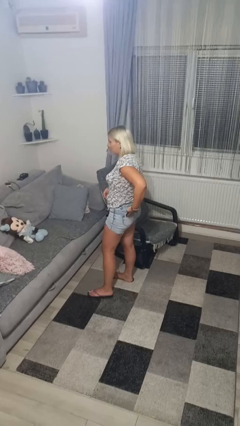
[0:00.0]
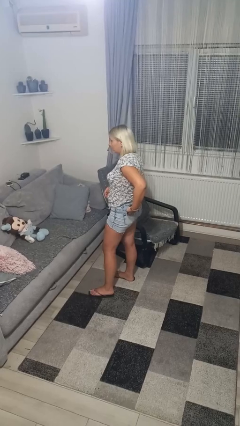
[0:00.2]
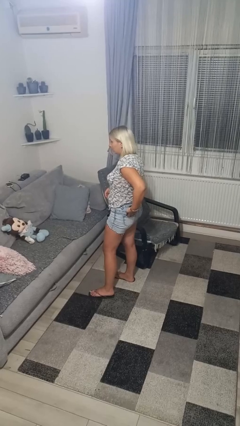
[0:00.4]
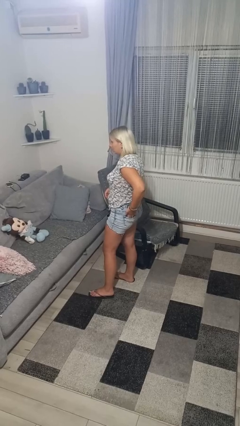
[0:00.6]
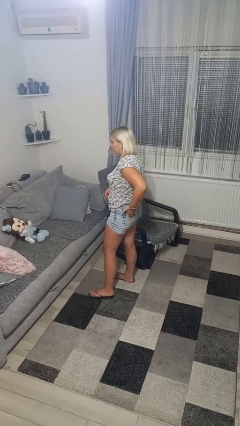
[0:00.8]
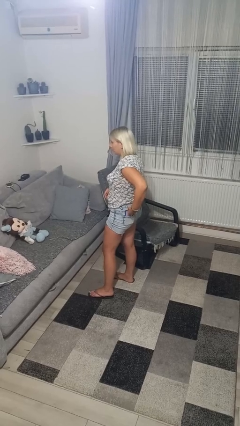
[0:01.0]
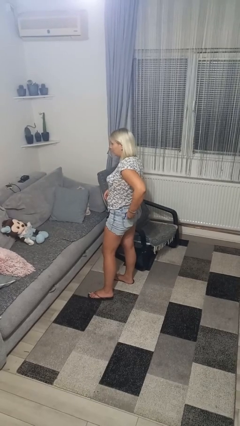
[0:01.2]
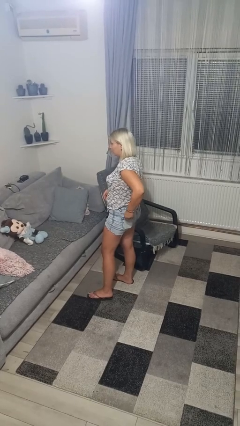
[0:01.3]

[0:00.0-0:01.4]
person puts phone into pocket

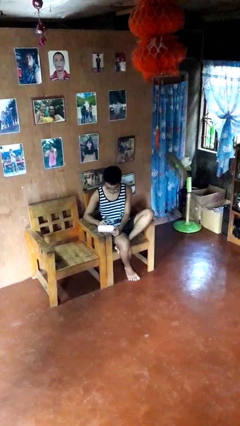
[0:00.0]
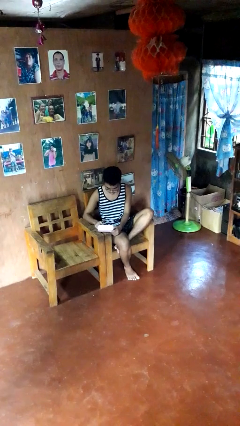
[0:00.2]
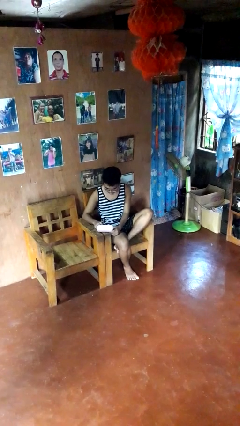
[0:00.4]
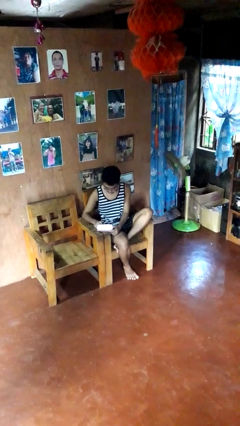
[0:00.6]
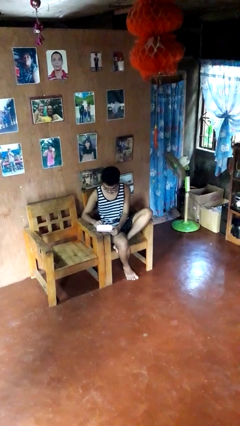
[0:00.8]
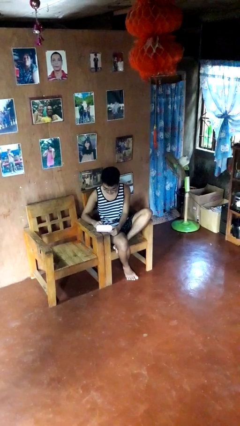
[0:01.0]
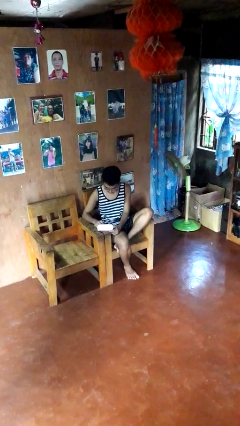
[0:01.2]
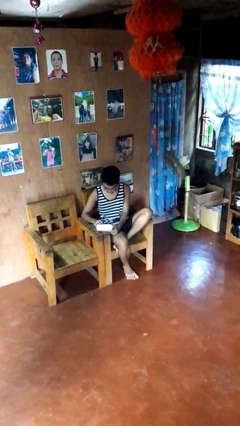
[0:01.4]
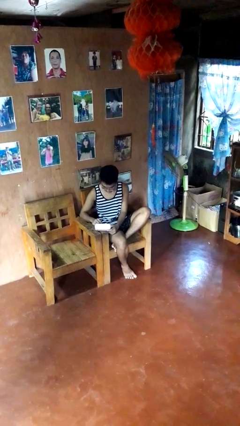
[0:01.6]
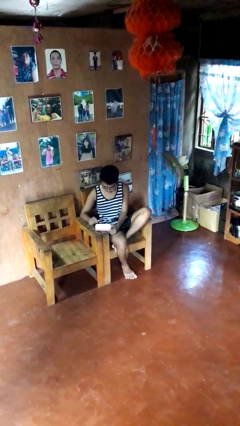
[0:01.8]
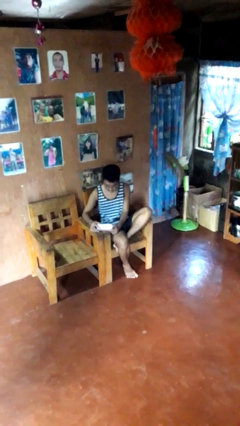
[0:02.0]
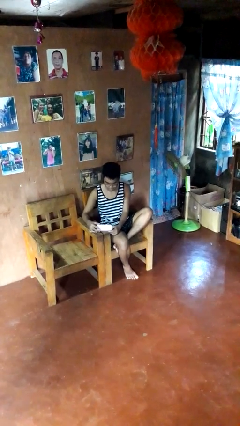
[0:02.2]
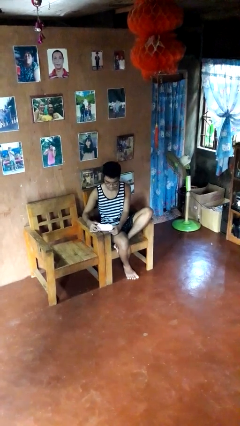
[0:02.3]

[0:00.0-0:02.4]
person searches jewelry box

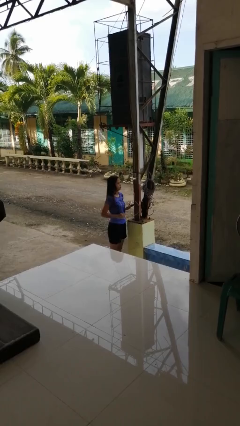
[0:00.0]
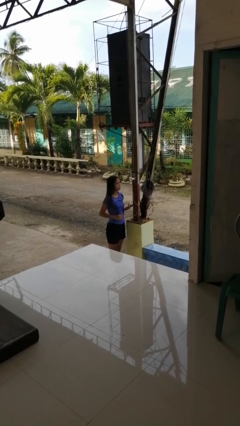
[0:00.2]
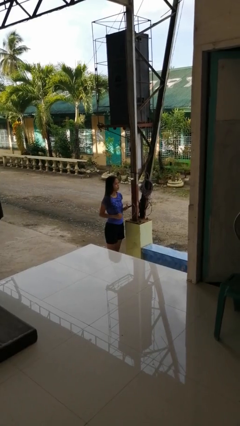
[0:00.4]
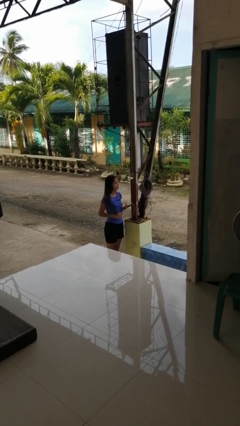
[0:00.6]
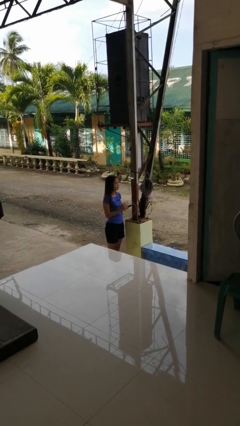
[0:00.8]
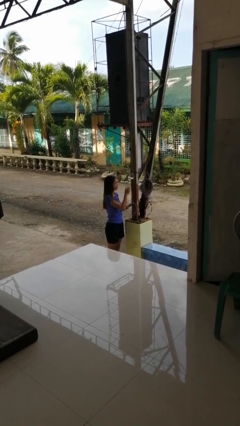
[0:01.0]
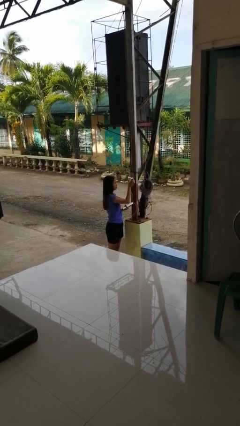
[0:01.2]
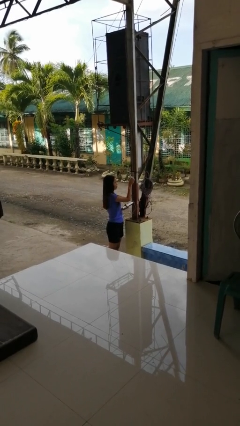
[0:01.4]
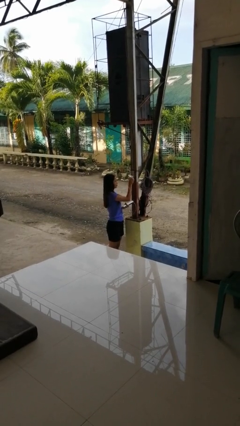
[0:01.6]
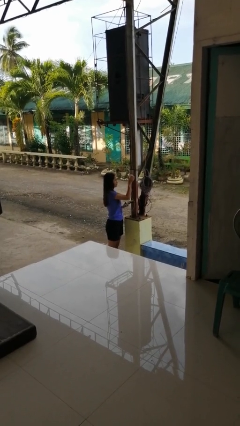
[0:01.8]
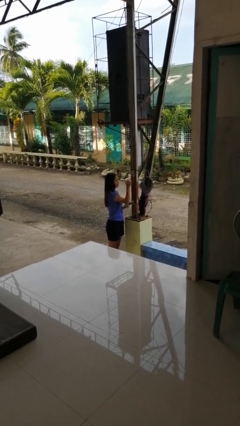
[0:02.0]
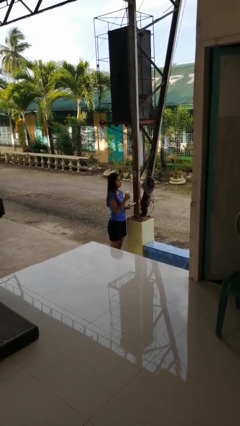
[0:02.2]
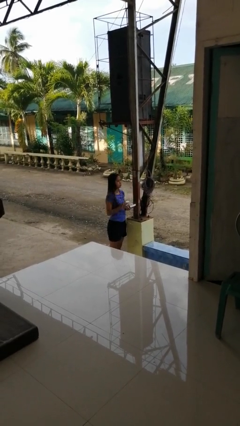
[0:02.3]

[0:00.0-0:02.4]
person unplugs from electrical socket

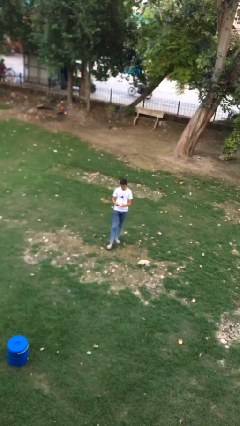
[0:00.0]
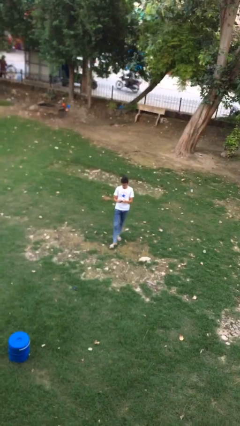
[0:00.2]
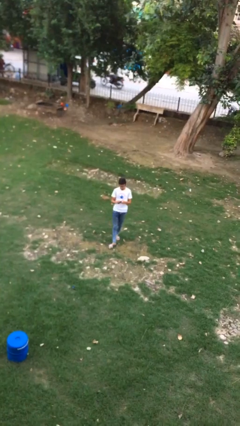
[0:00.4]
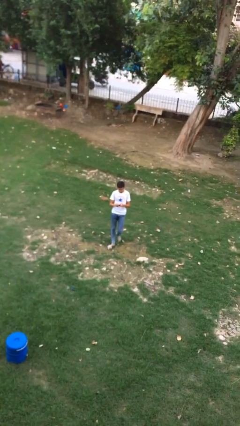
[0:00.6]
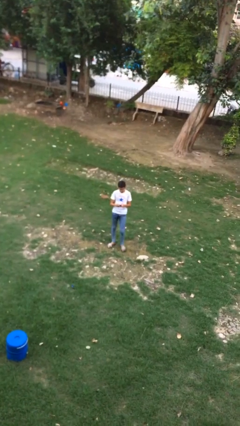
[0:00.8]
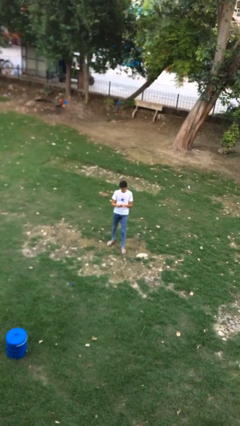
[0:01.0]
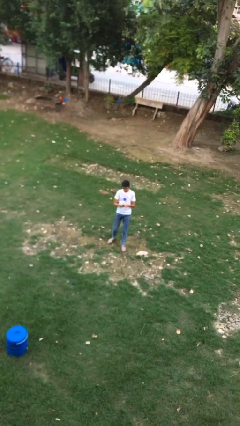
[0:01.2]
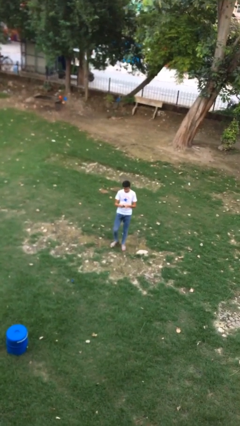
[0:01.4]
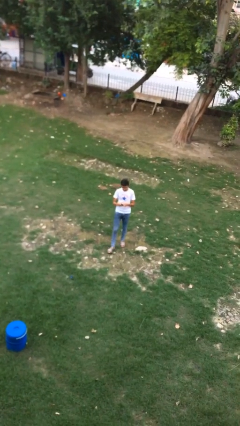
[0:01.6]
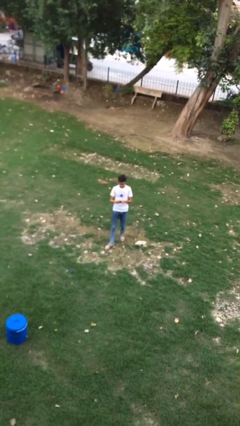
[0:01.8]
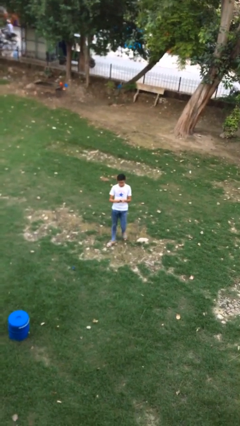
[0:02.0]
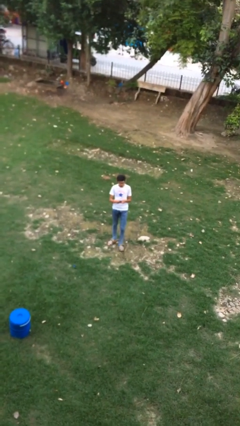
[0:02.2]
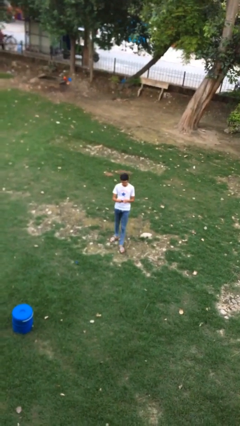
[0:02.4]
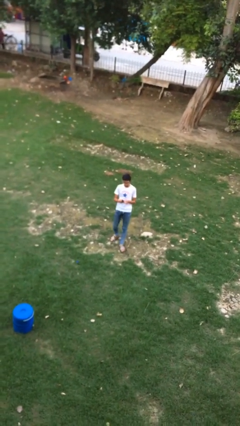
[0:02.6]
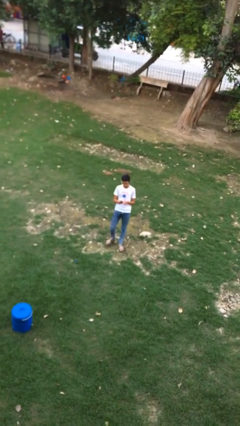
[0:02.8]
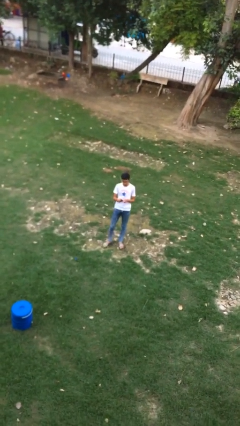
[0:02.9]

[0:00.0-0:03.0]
person texts on phone

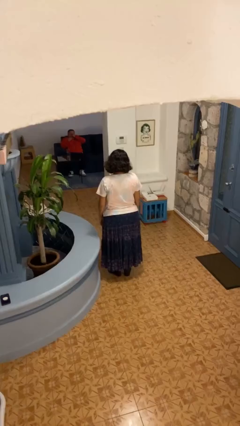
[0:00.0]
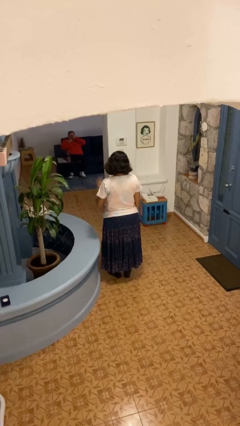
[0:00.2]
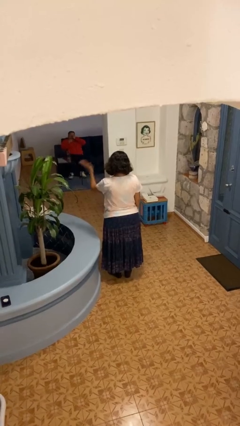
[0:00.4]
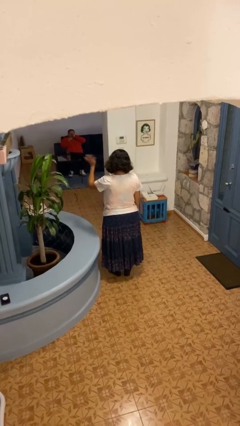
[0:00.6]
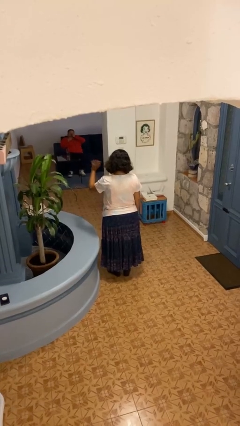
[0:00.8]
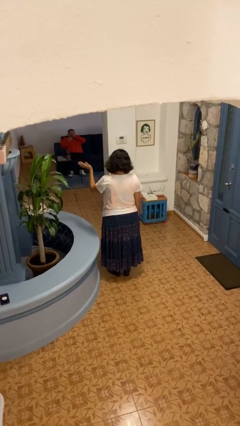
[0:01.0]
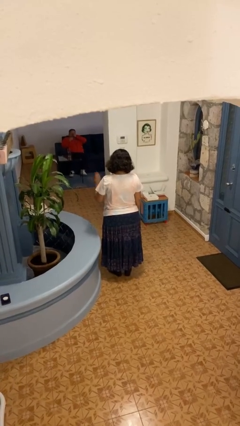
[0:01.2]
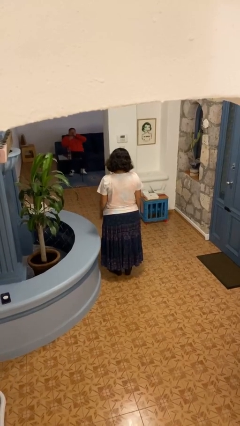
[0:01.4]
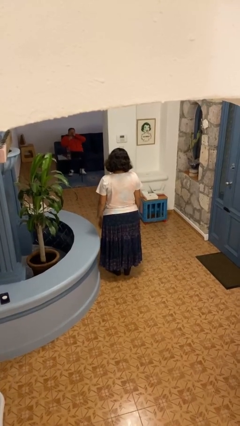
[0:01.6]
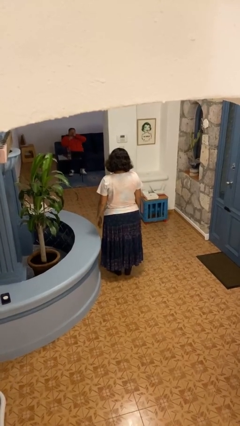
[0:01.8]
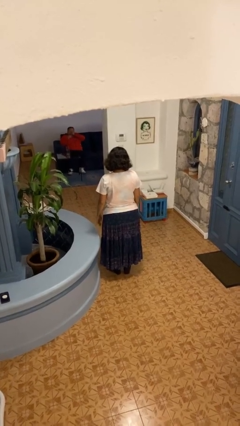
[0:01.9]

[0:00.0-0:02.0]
person waves at person

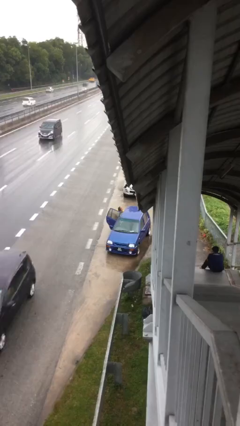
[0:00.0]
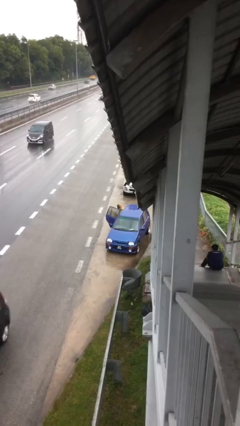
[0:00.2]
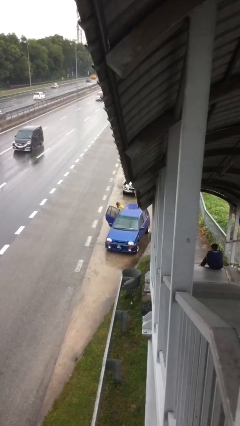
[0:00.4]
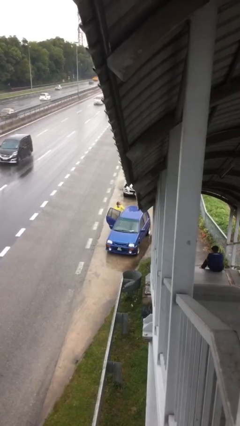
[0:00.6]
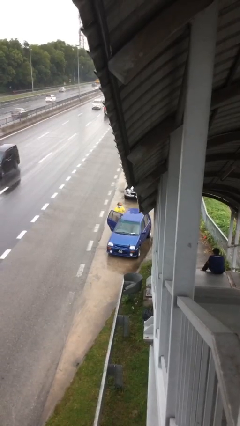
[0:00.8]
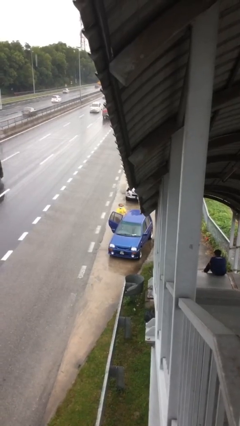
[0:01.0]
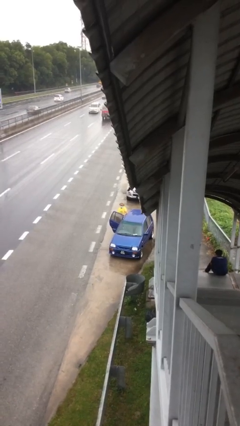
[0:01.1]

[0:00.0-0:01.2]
person unloads car

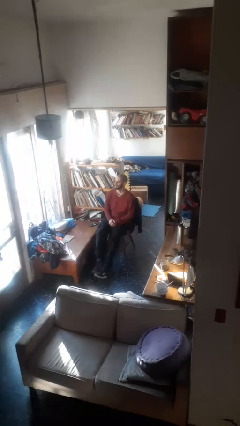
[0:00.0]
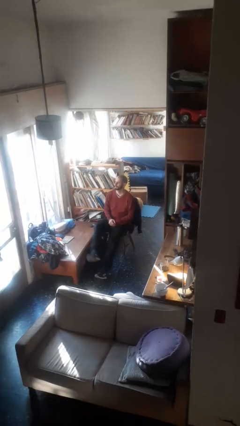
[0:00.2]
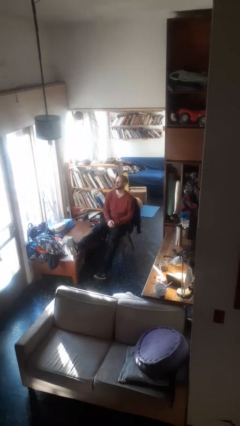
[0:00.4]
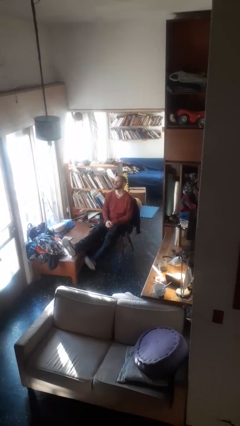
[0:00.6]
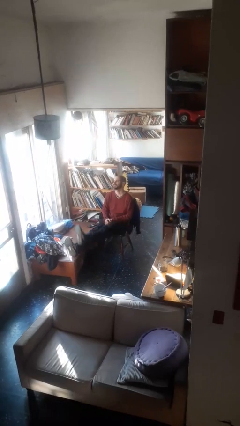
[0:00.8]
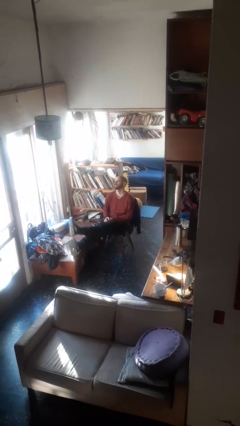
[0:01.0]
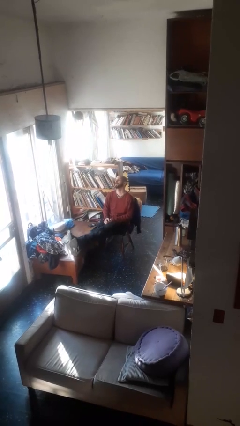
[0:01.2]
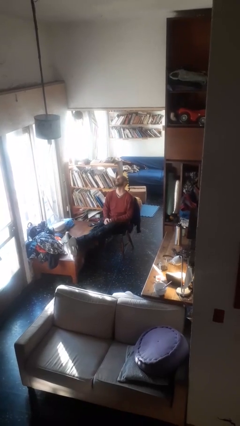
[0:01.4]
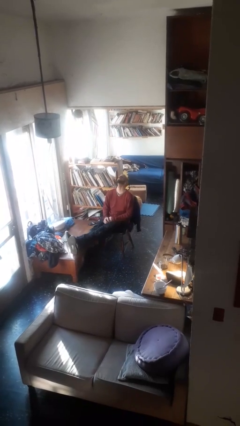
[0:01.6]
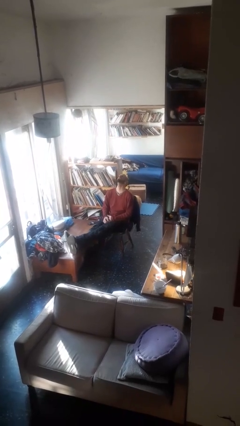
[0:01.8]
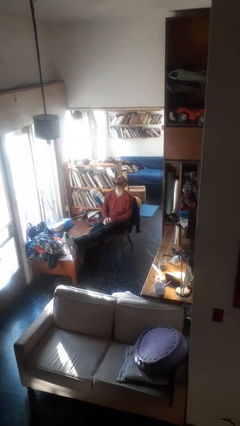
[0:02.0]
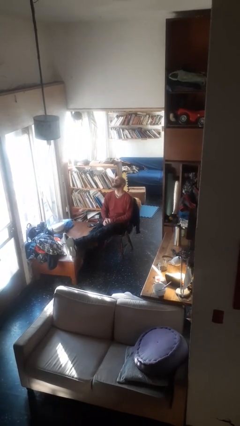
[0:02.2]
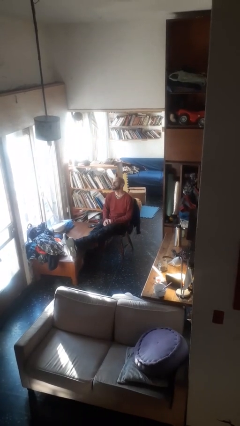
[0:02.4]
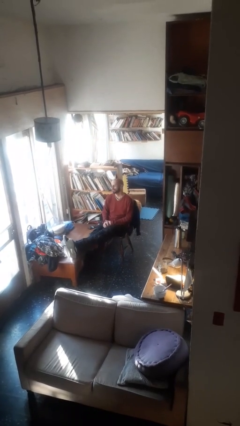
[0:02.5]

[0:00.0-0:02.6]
person puts feet up

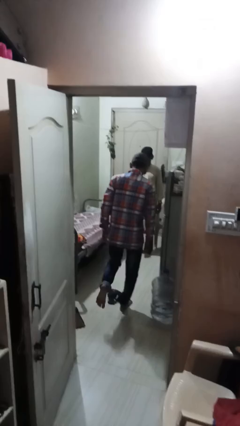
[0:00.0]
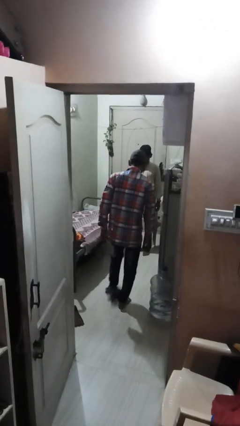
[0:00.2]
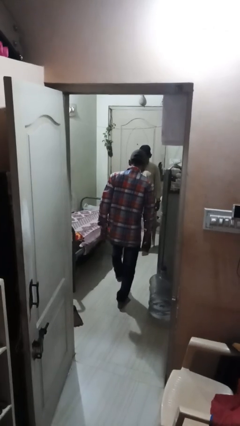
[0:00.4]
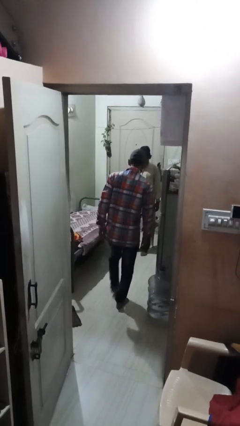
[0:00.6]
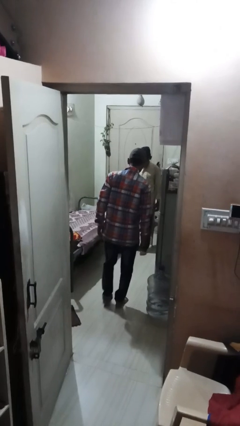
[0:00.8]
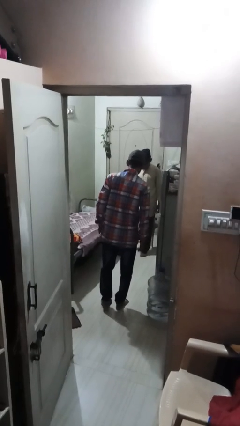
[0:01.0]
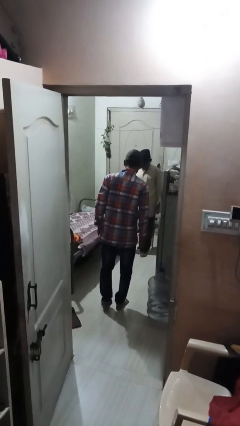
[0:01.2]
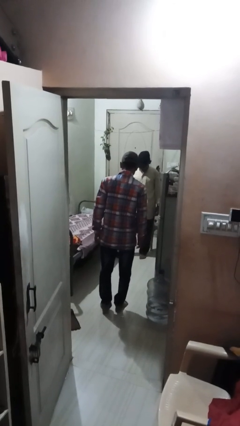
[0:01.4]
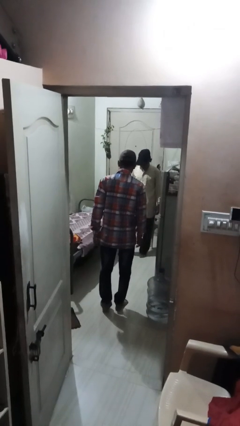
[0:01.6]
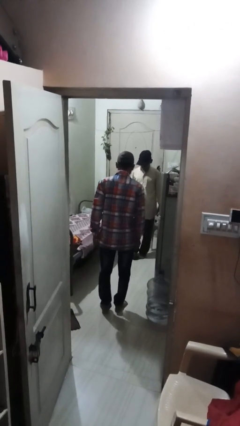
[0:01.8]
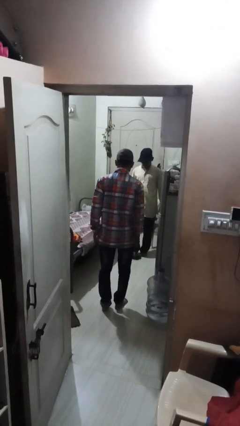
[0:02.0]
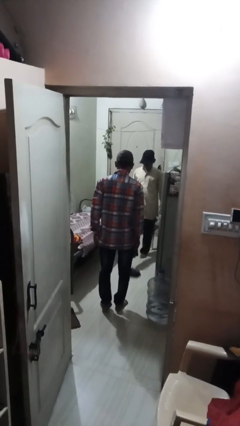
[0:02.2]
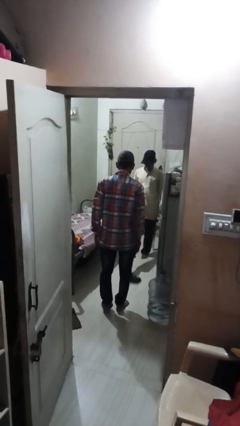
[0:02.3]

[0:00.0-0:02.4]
person kicks object to person
